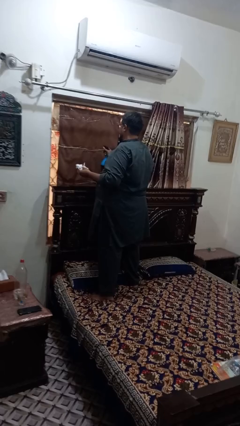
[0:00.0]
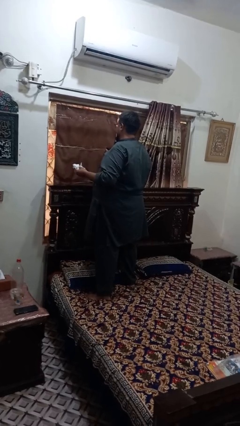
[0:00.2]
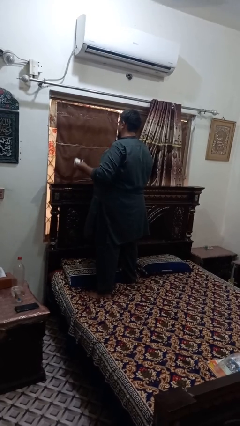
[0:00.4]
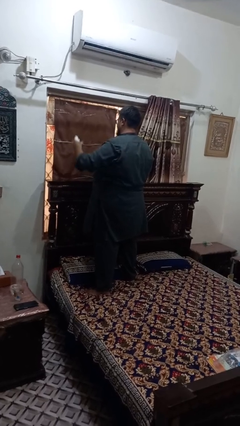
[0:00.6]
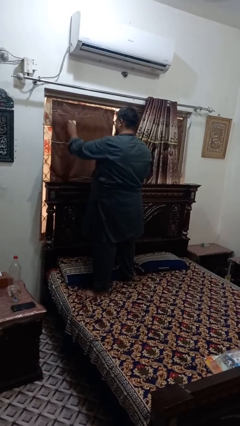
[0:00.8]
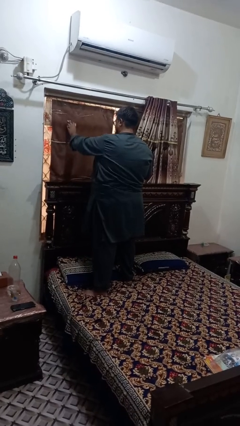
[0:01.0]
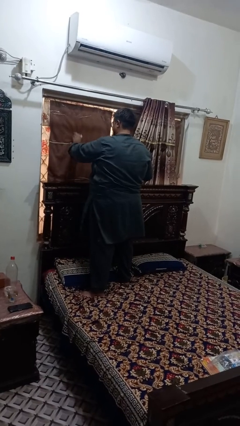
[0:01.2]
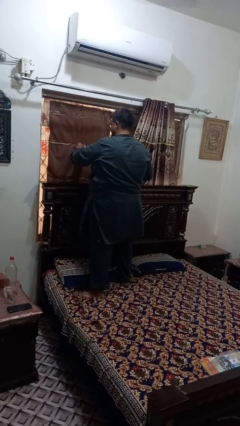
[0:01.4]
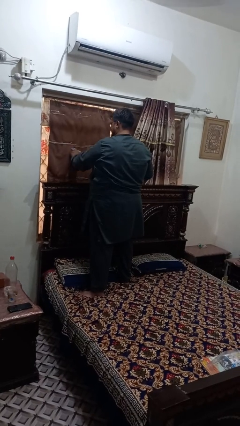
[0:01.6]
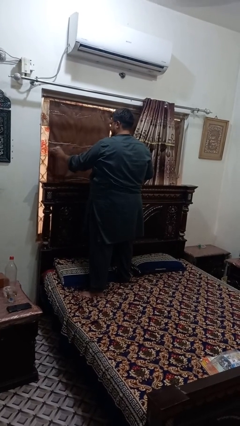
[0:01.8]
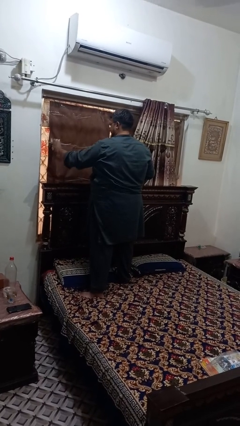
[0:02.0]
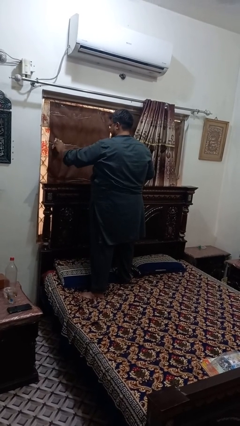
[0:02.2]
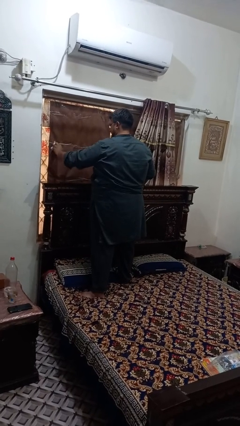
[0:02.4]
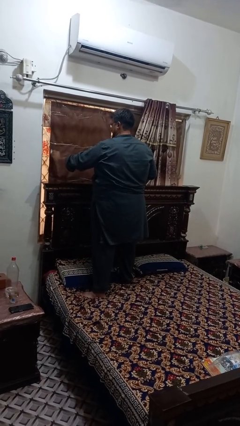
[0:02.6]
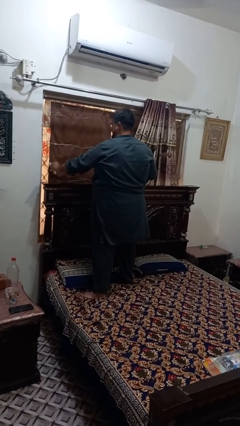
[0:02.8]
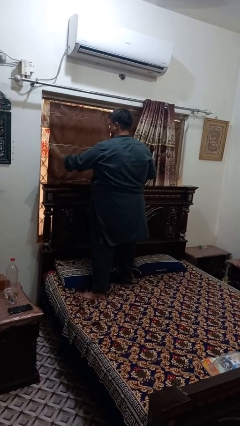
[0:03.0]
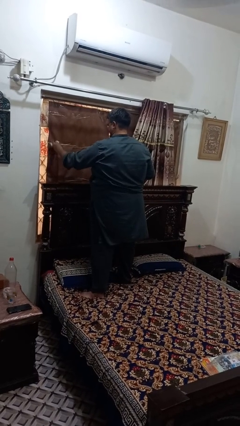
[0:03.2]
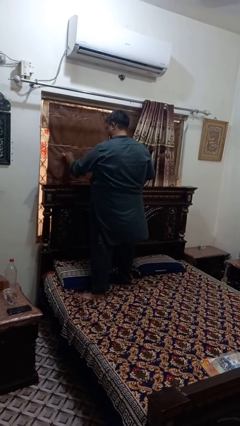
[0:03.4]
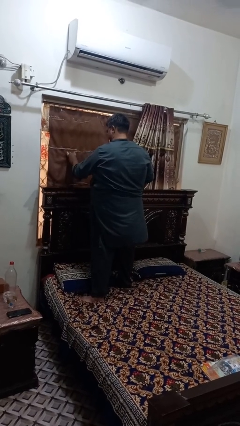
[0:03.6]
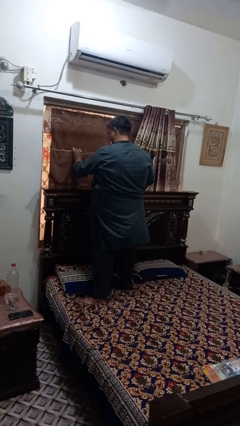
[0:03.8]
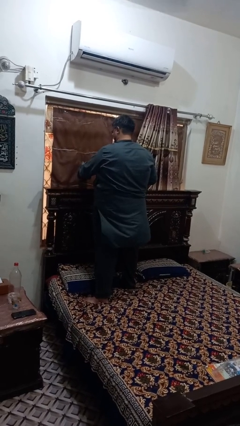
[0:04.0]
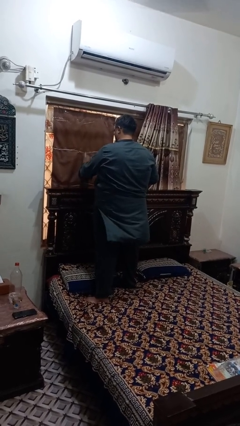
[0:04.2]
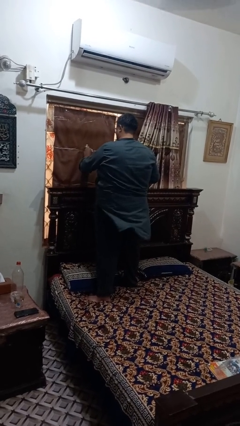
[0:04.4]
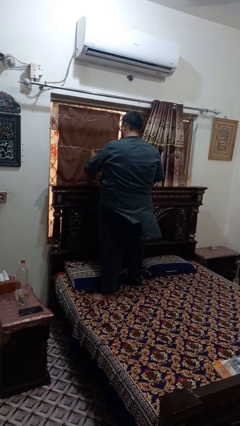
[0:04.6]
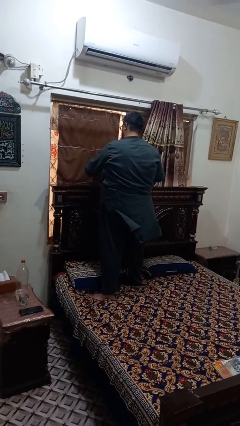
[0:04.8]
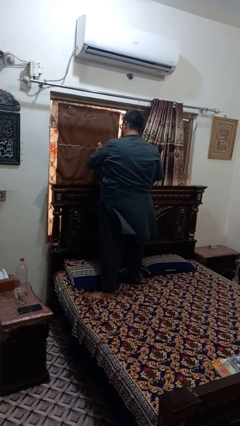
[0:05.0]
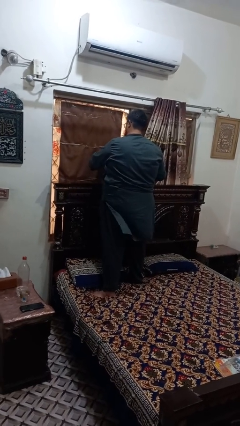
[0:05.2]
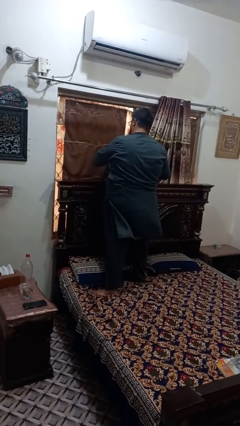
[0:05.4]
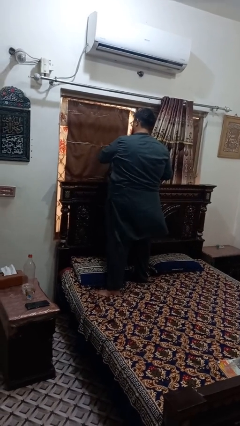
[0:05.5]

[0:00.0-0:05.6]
person washes window

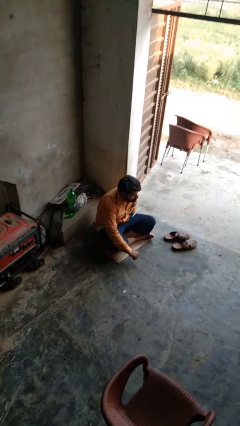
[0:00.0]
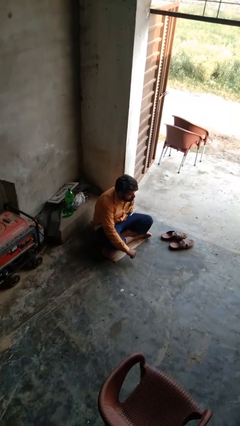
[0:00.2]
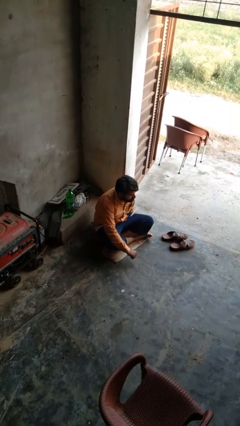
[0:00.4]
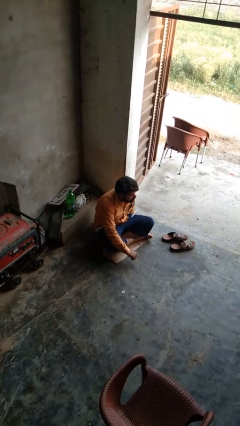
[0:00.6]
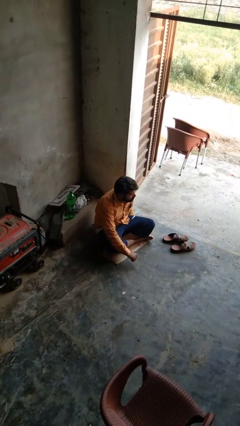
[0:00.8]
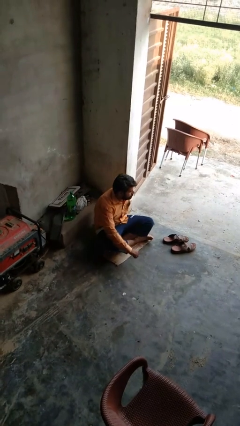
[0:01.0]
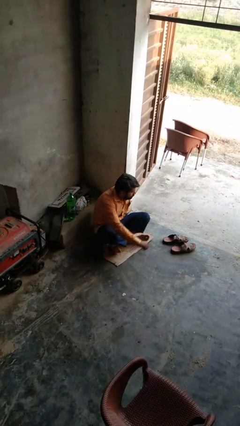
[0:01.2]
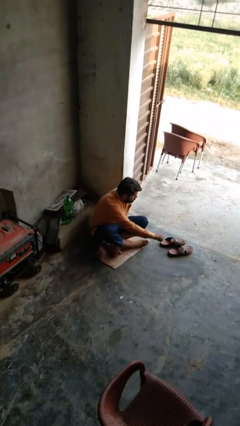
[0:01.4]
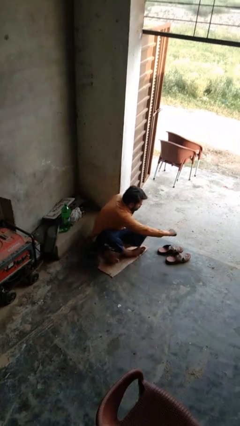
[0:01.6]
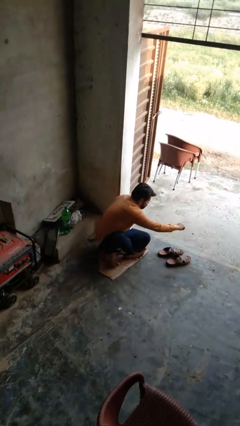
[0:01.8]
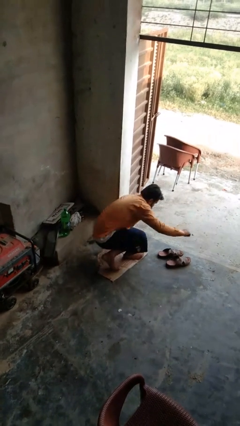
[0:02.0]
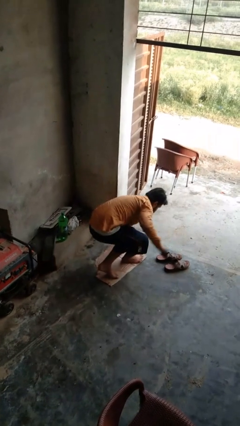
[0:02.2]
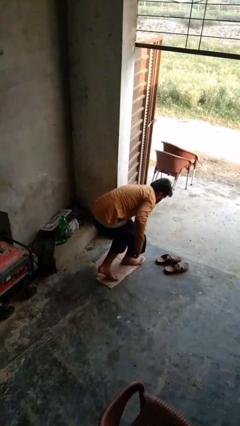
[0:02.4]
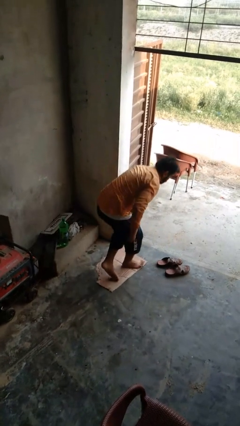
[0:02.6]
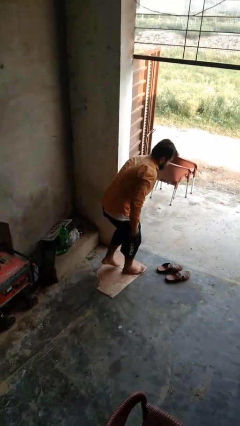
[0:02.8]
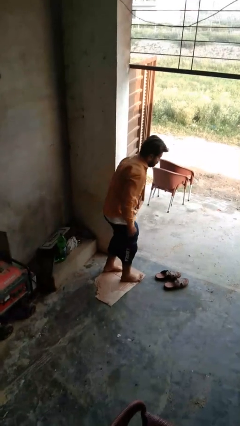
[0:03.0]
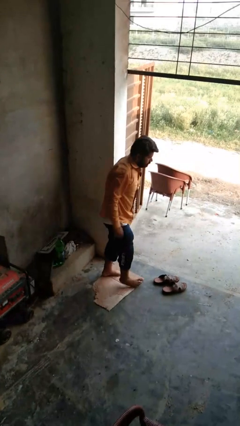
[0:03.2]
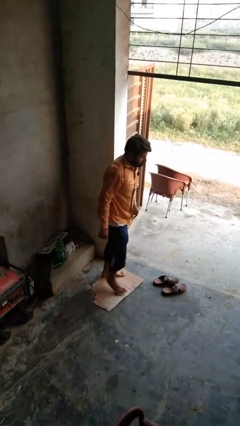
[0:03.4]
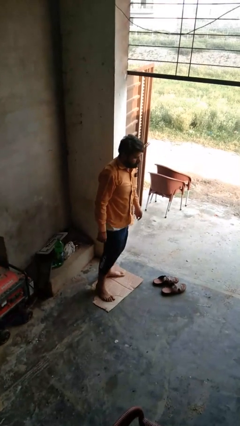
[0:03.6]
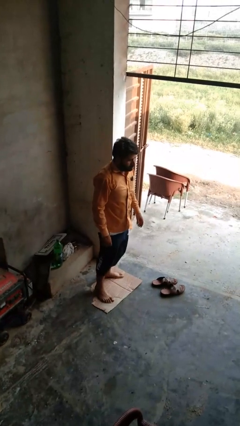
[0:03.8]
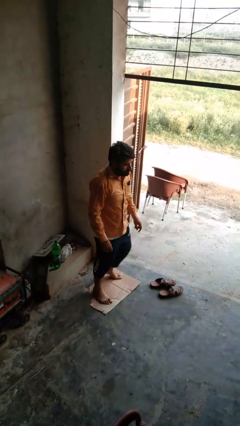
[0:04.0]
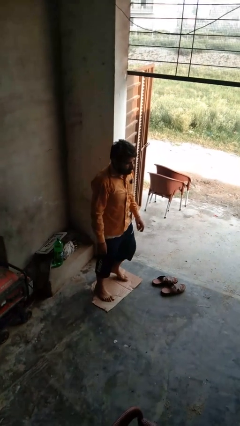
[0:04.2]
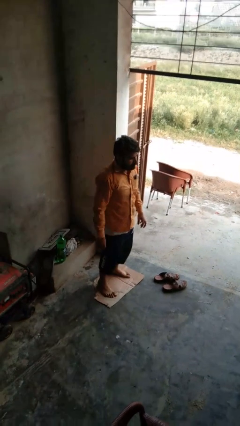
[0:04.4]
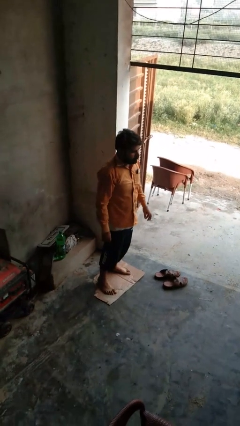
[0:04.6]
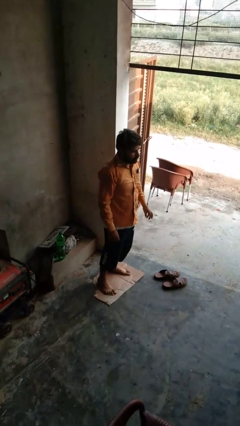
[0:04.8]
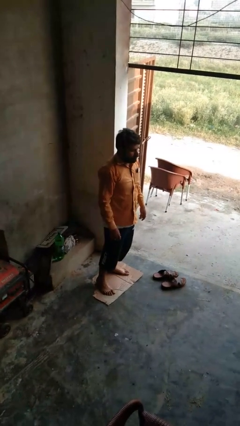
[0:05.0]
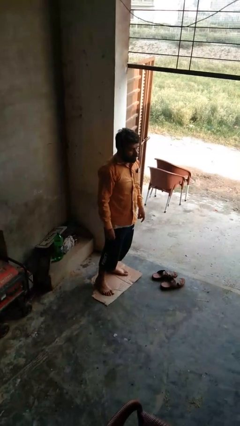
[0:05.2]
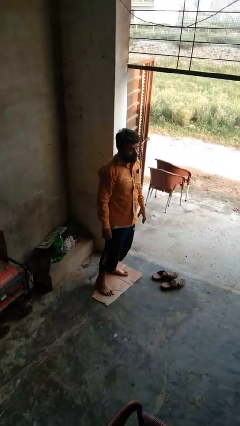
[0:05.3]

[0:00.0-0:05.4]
person stands up from floor

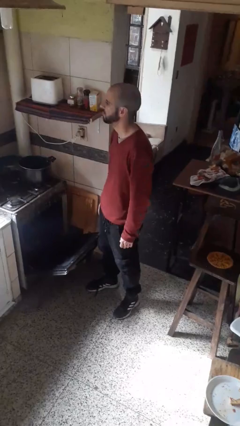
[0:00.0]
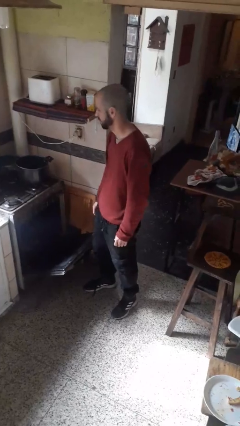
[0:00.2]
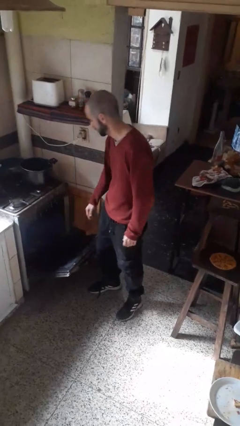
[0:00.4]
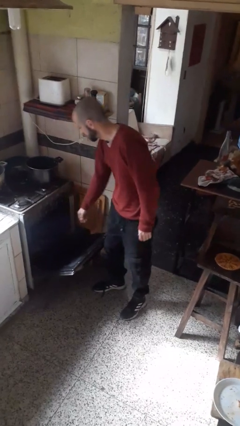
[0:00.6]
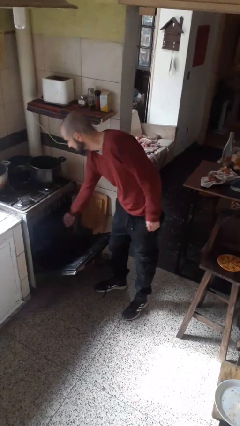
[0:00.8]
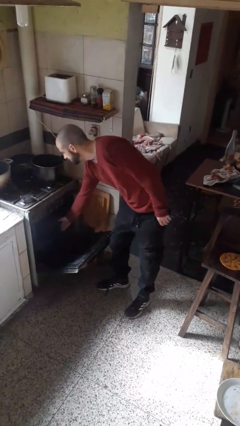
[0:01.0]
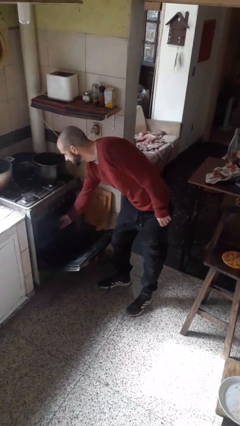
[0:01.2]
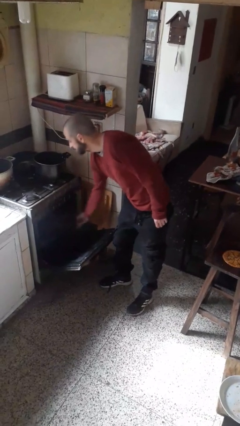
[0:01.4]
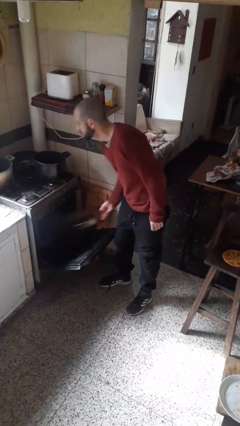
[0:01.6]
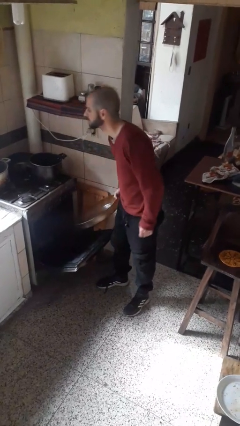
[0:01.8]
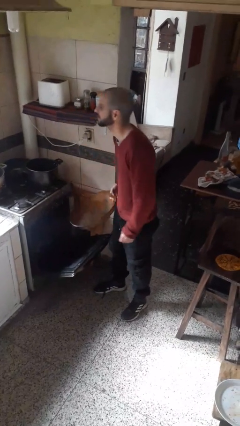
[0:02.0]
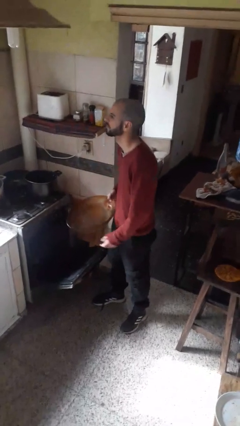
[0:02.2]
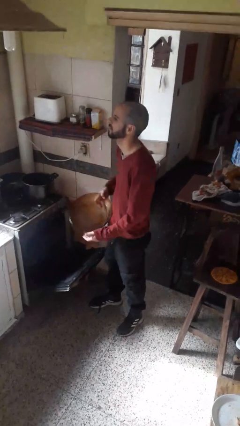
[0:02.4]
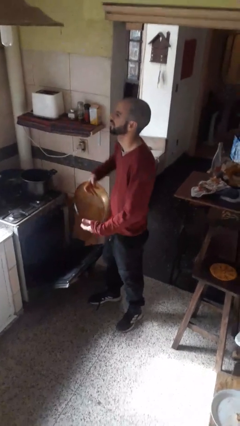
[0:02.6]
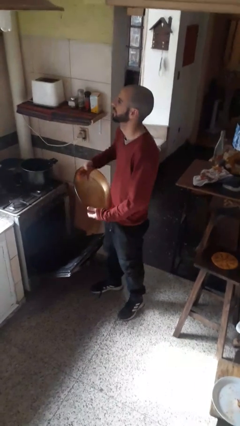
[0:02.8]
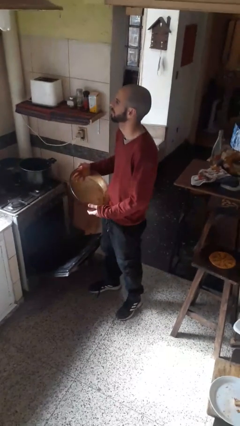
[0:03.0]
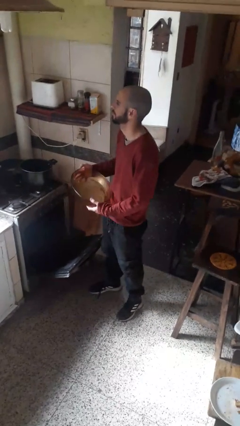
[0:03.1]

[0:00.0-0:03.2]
person takes object from oven

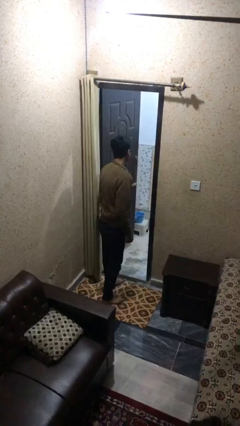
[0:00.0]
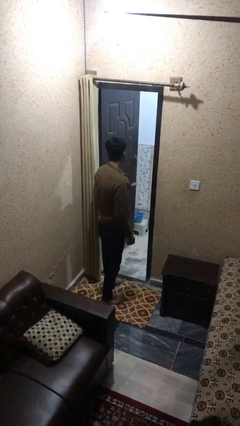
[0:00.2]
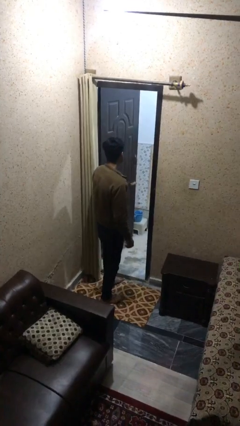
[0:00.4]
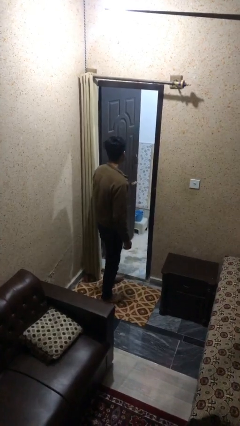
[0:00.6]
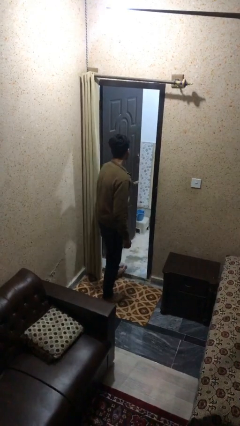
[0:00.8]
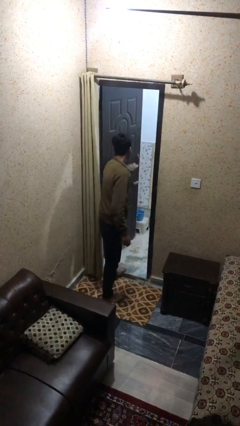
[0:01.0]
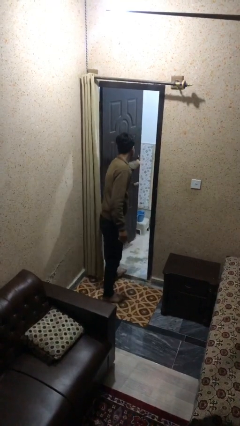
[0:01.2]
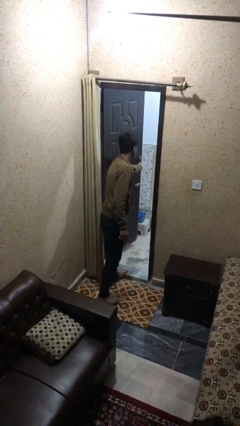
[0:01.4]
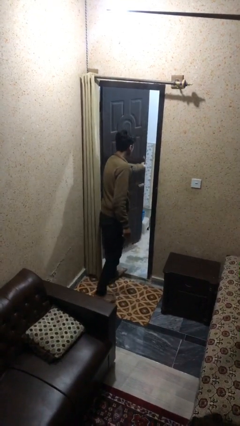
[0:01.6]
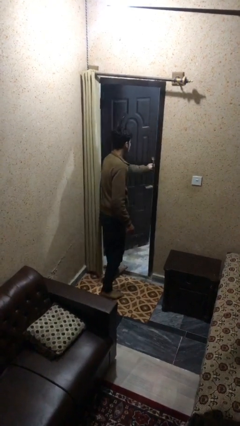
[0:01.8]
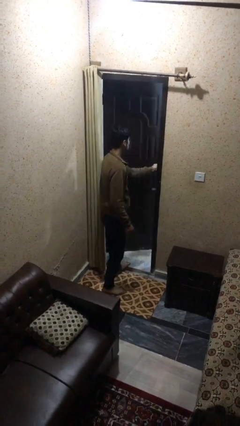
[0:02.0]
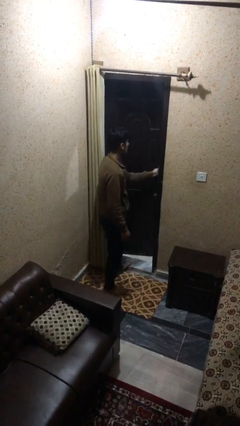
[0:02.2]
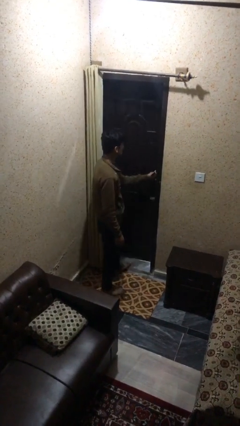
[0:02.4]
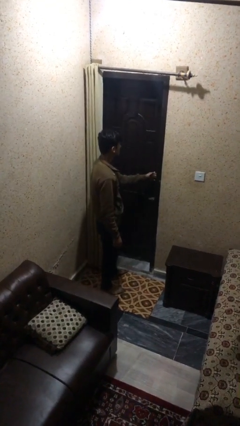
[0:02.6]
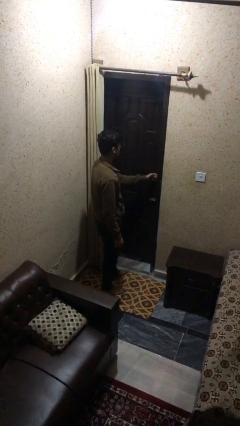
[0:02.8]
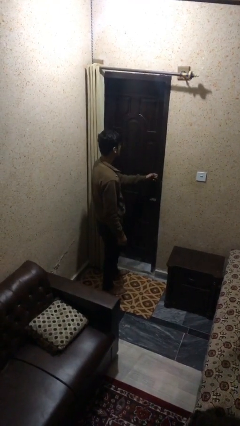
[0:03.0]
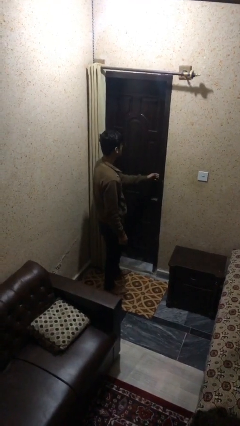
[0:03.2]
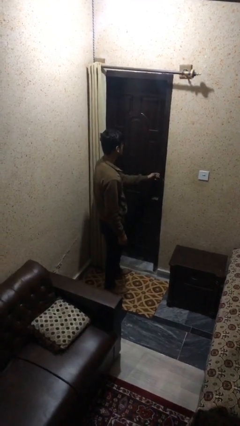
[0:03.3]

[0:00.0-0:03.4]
person closes facility door

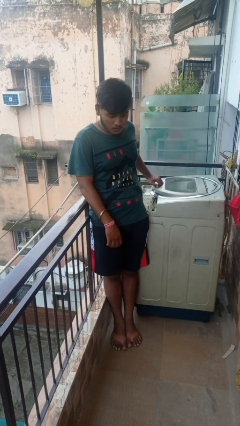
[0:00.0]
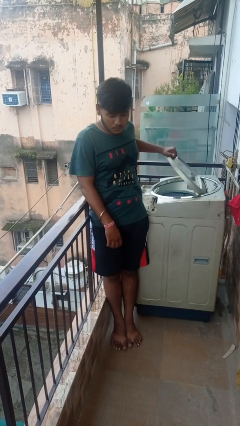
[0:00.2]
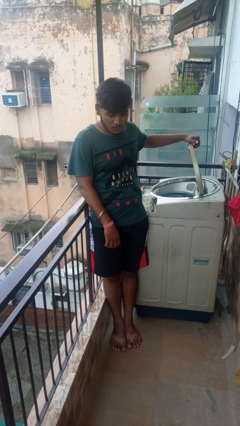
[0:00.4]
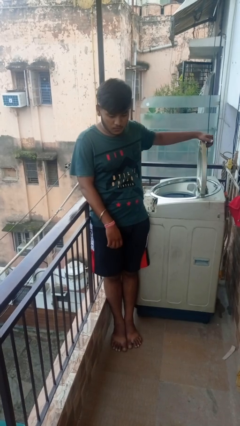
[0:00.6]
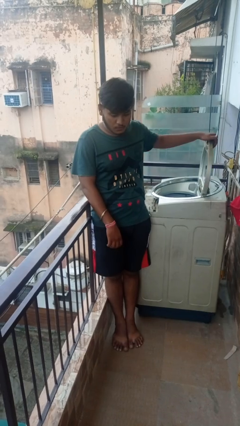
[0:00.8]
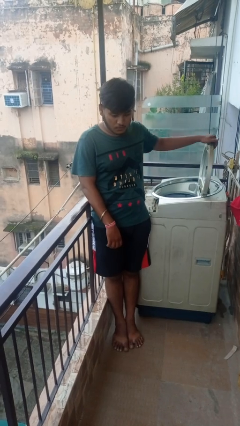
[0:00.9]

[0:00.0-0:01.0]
person opens clothes washer
